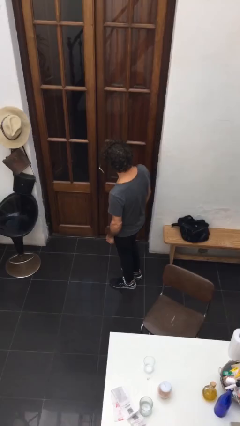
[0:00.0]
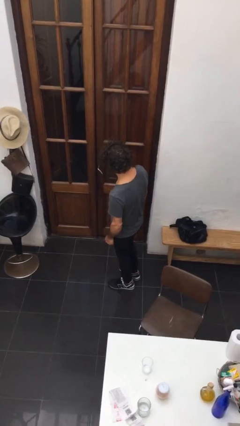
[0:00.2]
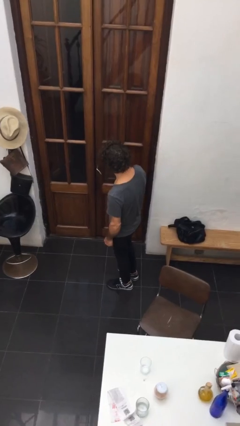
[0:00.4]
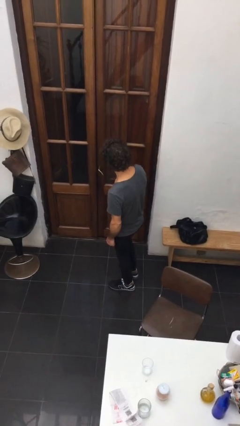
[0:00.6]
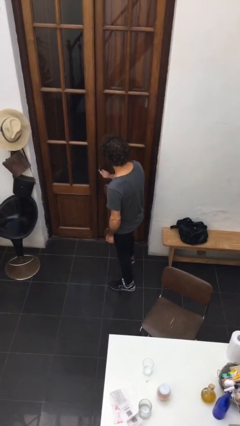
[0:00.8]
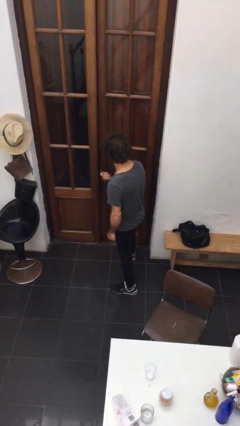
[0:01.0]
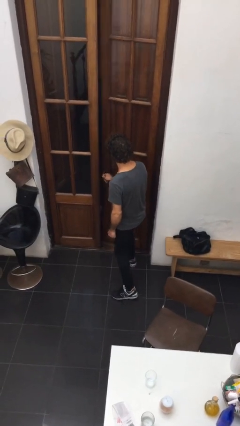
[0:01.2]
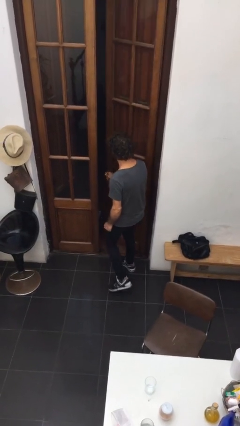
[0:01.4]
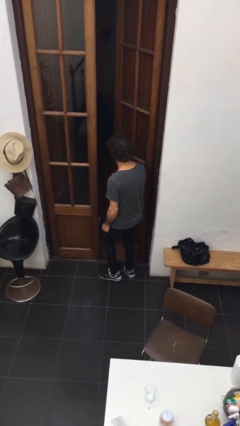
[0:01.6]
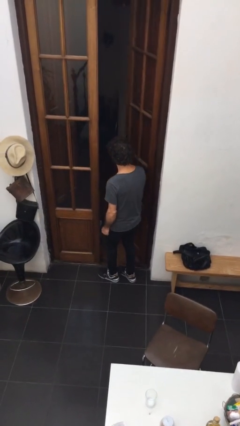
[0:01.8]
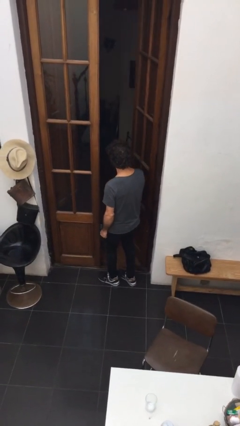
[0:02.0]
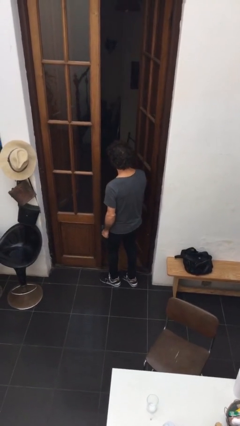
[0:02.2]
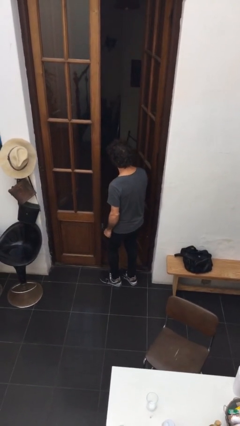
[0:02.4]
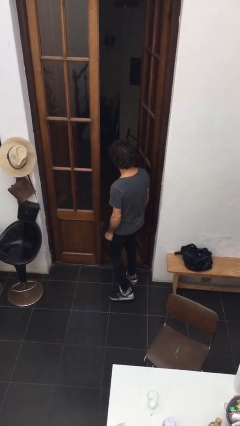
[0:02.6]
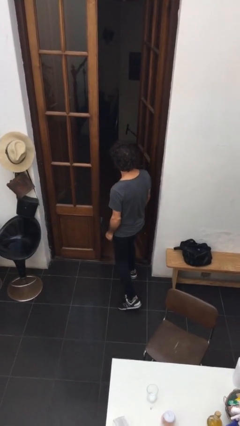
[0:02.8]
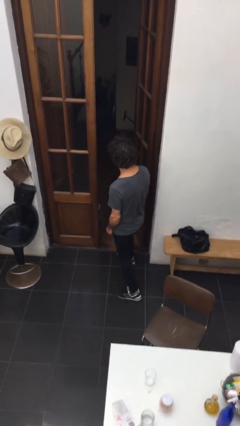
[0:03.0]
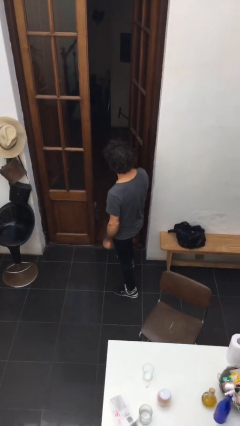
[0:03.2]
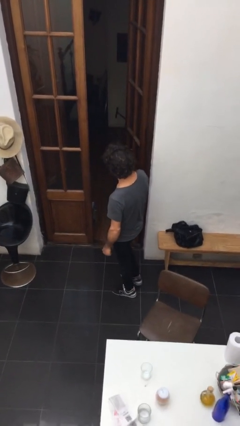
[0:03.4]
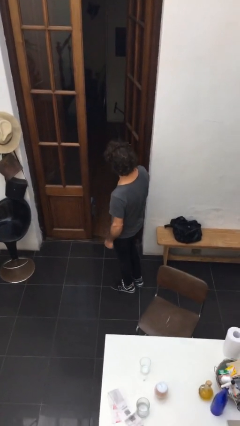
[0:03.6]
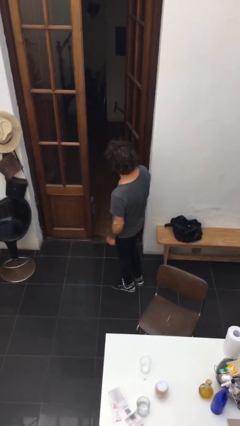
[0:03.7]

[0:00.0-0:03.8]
person opens facility door

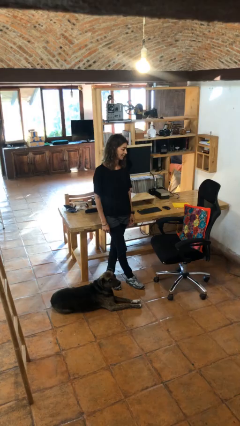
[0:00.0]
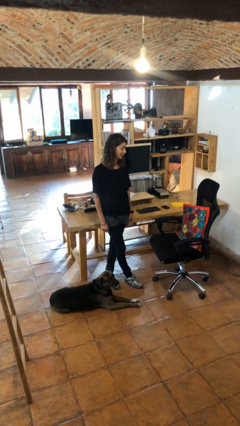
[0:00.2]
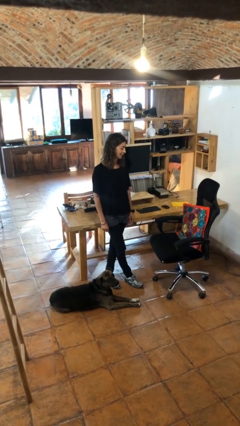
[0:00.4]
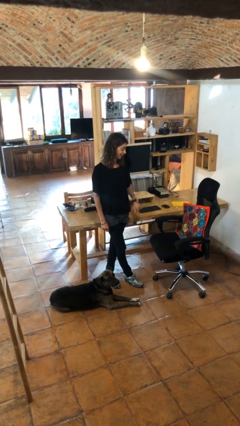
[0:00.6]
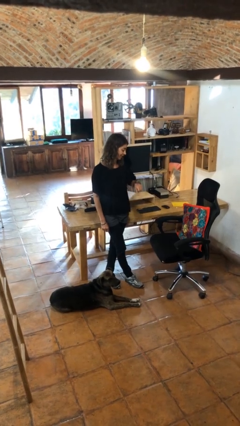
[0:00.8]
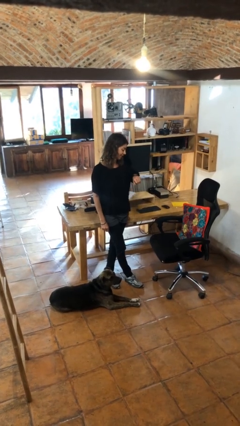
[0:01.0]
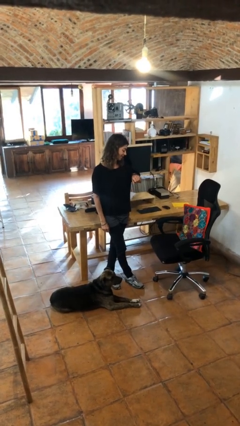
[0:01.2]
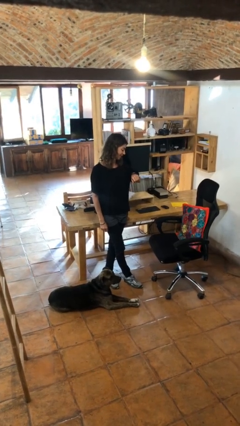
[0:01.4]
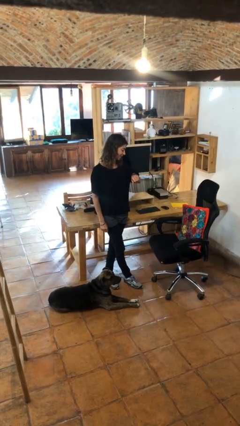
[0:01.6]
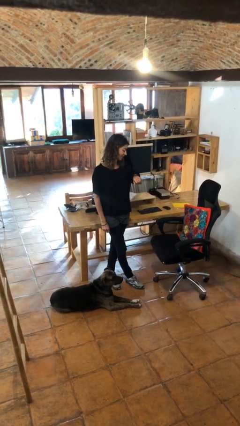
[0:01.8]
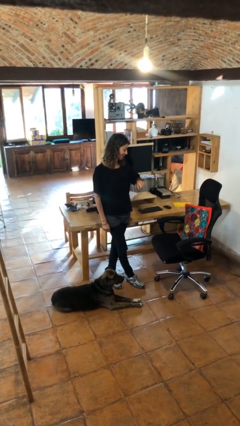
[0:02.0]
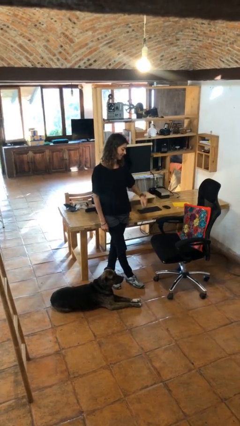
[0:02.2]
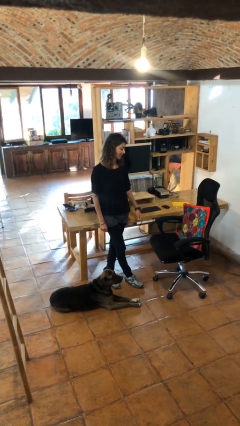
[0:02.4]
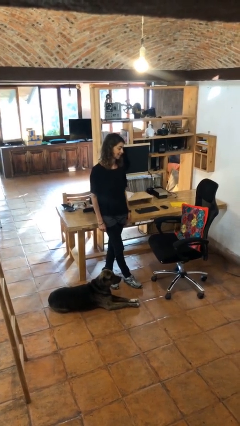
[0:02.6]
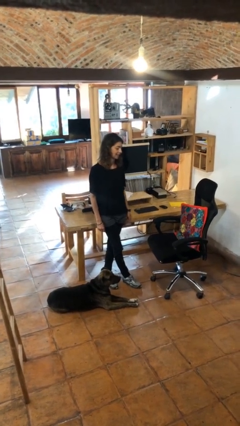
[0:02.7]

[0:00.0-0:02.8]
person looks at wristwatch

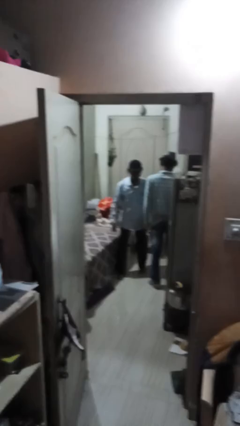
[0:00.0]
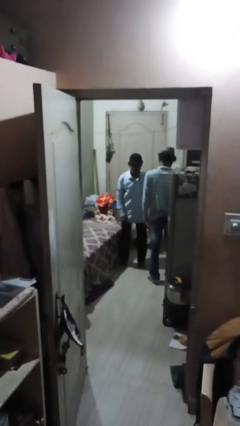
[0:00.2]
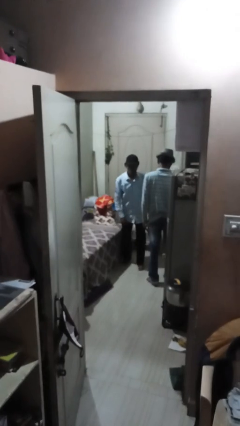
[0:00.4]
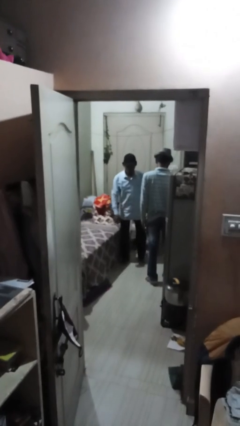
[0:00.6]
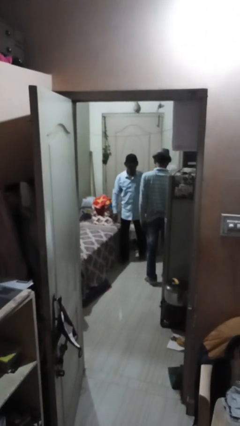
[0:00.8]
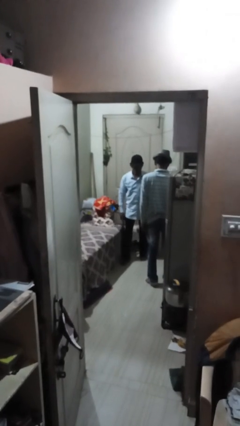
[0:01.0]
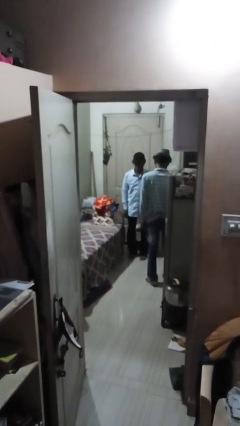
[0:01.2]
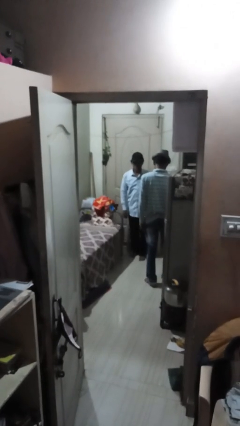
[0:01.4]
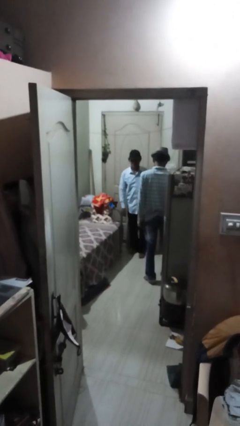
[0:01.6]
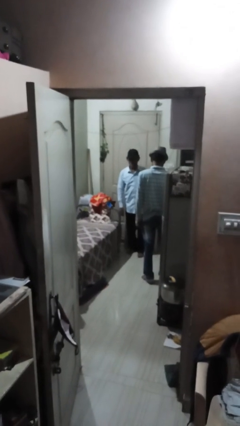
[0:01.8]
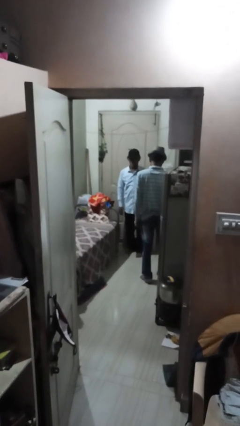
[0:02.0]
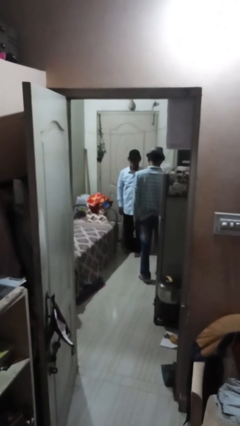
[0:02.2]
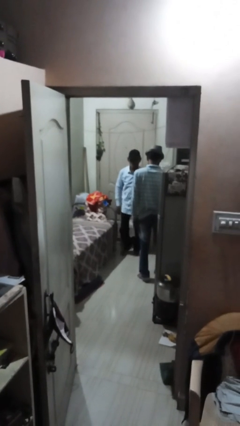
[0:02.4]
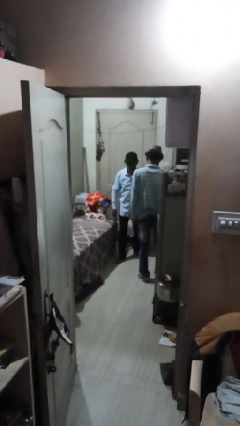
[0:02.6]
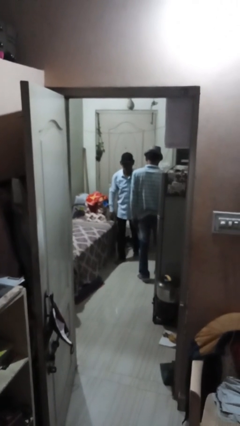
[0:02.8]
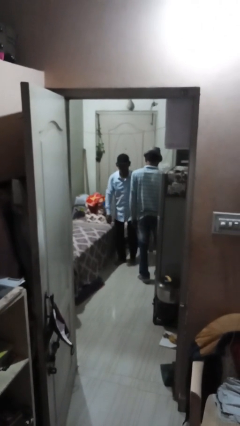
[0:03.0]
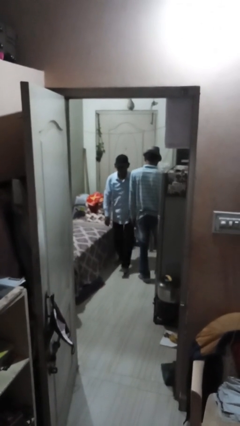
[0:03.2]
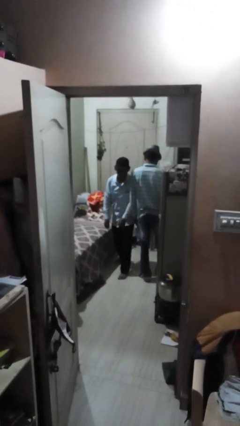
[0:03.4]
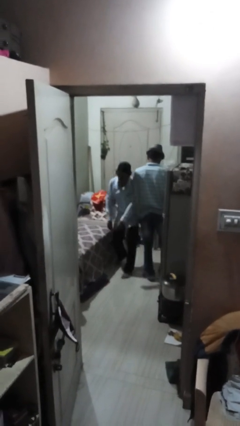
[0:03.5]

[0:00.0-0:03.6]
person bumps into person

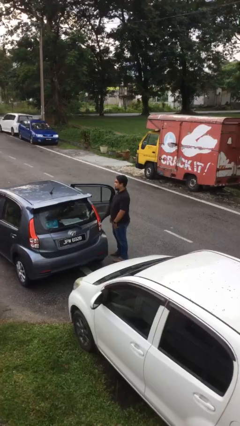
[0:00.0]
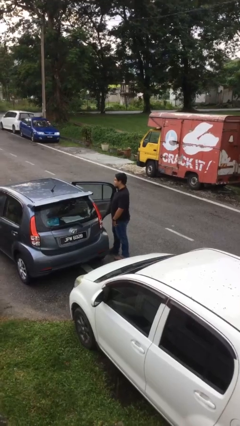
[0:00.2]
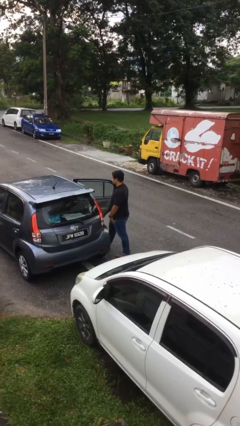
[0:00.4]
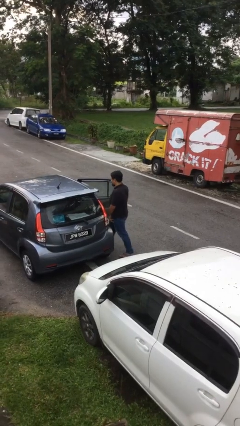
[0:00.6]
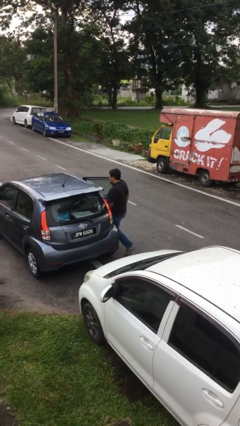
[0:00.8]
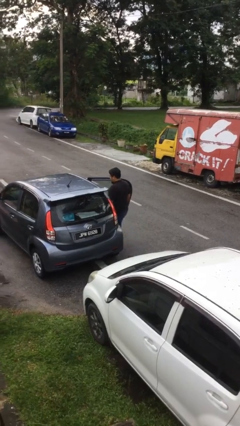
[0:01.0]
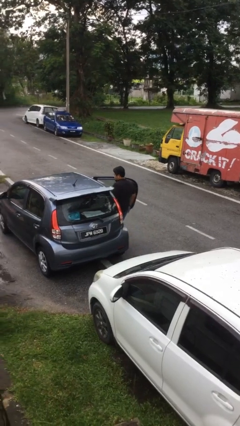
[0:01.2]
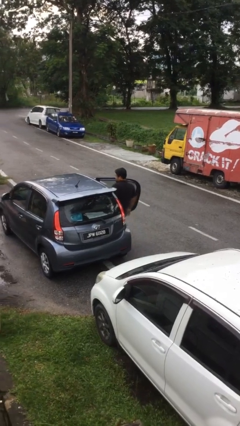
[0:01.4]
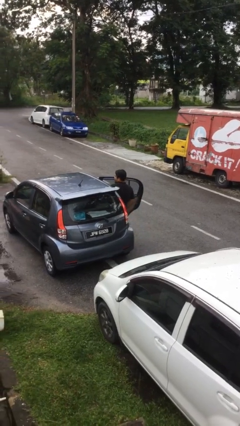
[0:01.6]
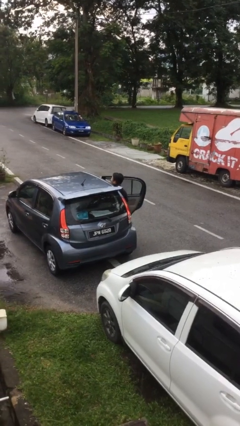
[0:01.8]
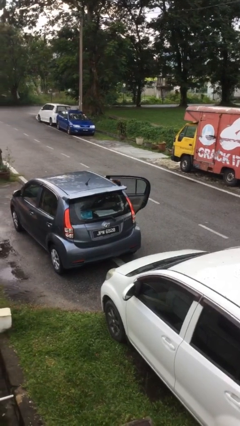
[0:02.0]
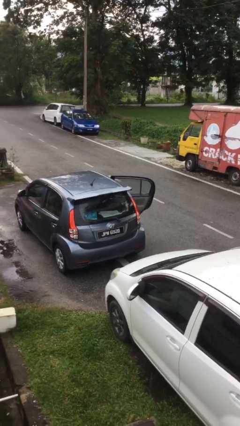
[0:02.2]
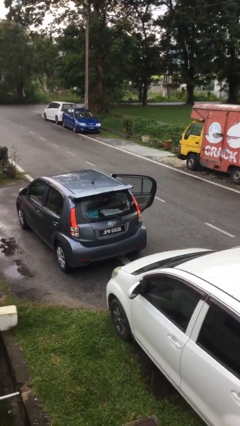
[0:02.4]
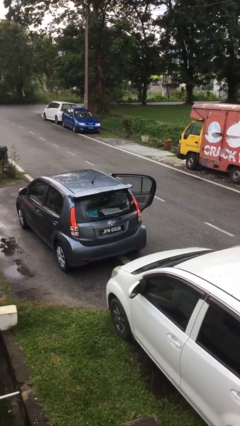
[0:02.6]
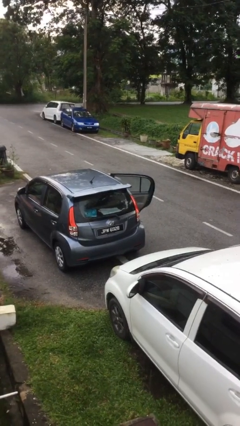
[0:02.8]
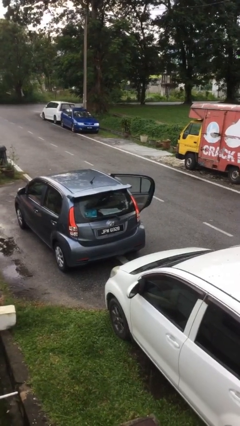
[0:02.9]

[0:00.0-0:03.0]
person enters car

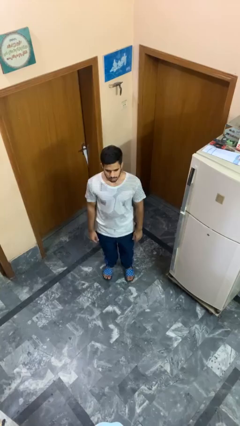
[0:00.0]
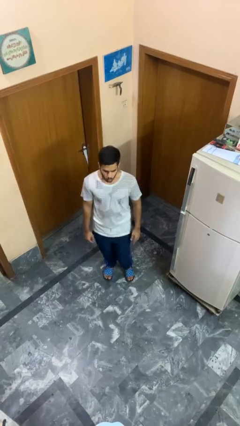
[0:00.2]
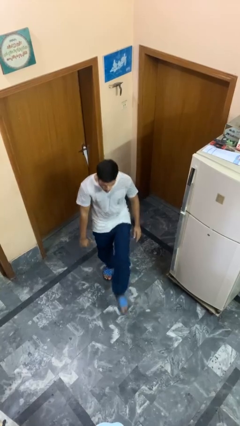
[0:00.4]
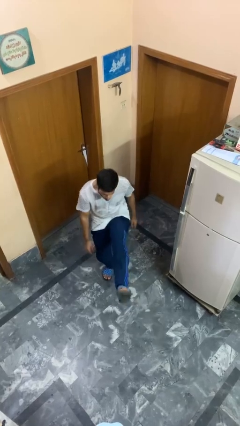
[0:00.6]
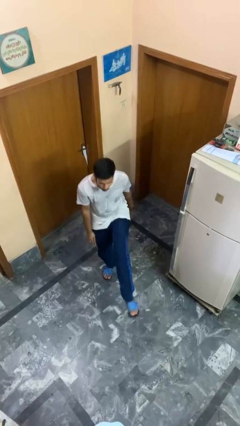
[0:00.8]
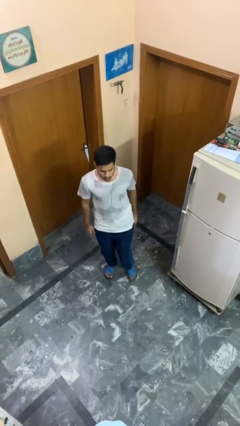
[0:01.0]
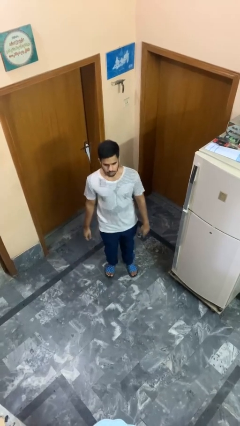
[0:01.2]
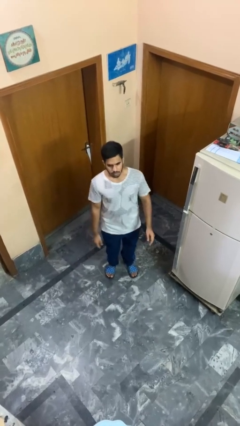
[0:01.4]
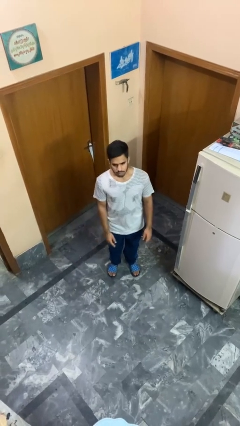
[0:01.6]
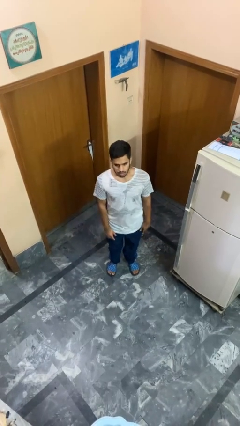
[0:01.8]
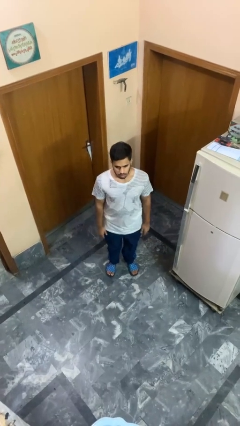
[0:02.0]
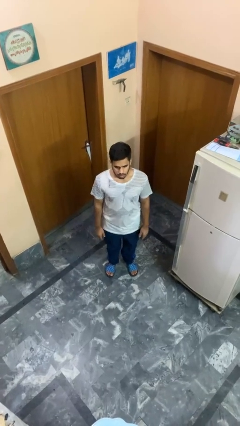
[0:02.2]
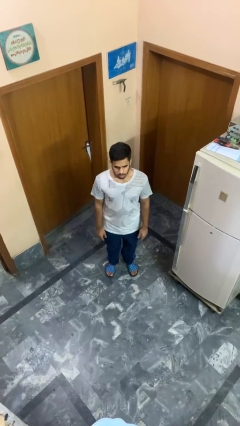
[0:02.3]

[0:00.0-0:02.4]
person karate kicks

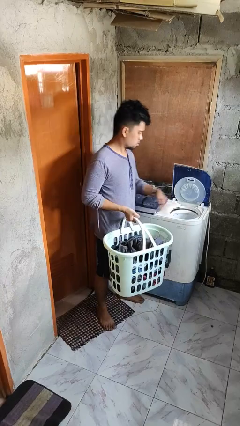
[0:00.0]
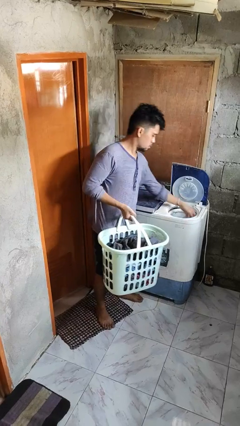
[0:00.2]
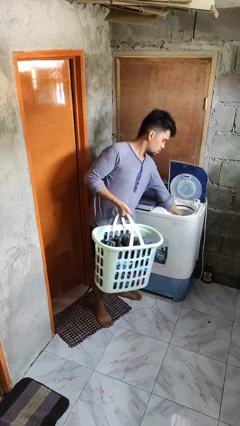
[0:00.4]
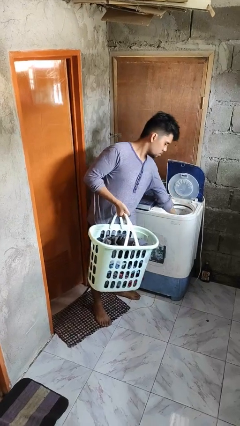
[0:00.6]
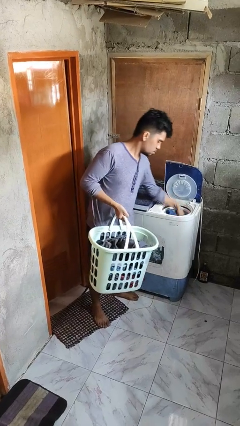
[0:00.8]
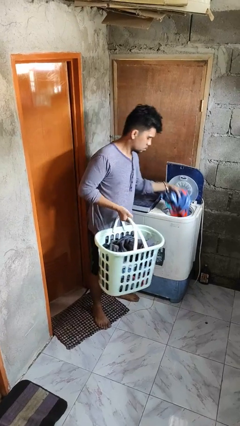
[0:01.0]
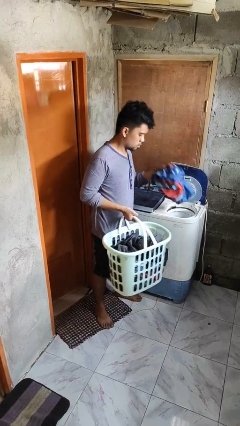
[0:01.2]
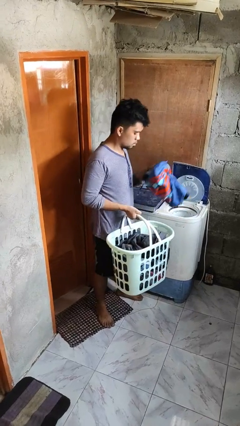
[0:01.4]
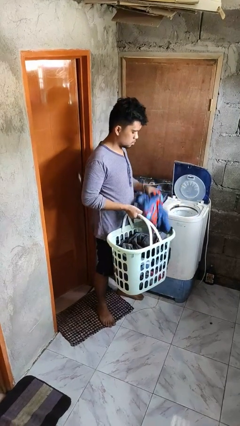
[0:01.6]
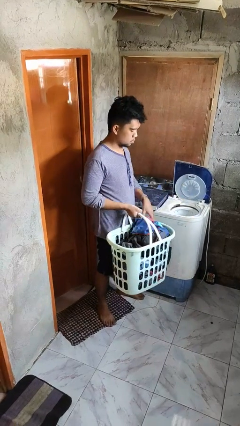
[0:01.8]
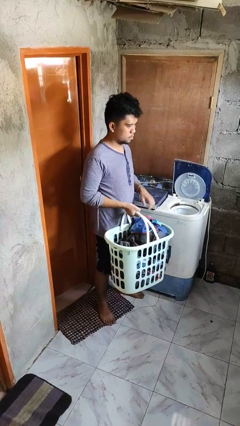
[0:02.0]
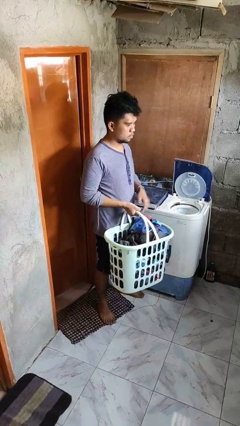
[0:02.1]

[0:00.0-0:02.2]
person unloads dryer
